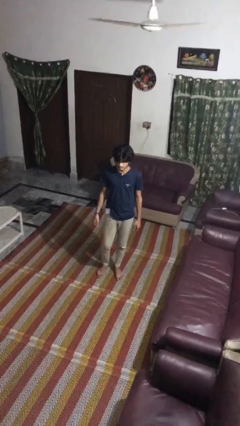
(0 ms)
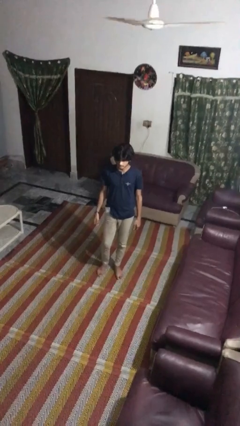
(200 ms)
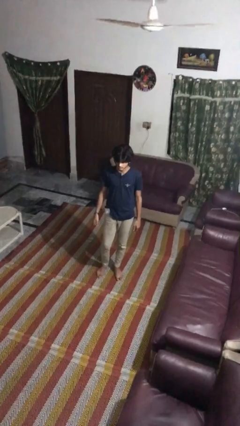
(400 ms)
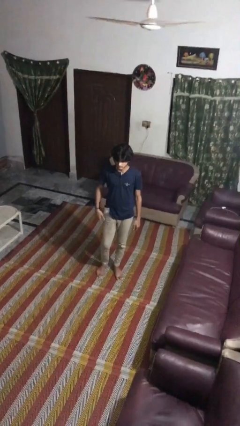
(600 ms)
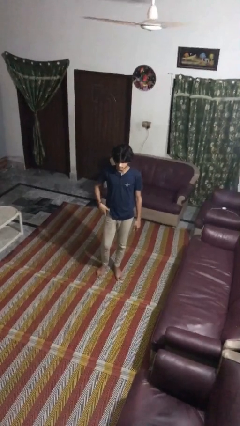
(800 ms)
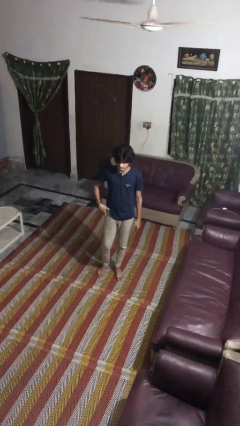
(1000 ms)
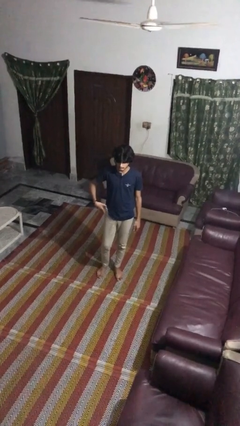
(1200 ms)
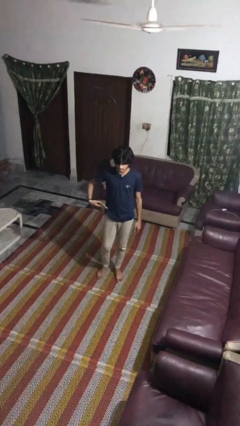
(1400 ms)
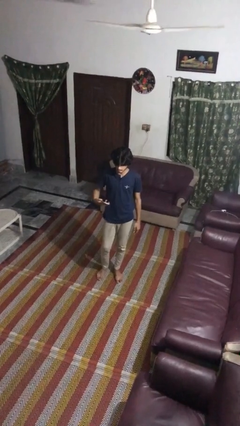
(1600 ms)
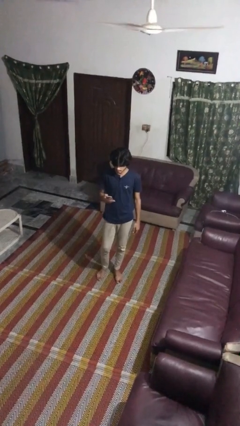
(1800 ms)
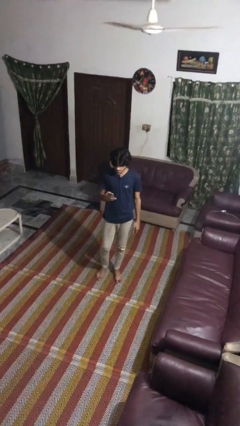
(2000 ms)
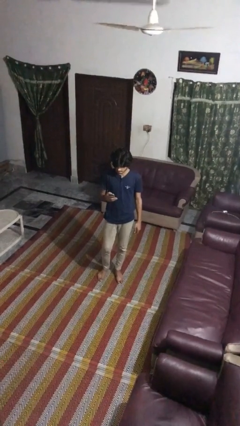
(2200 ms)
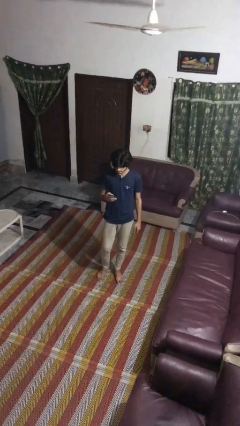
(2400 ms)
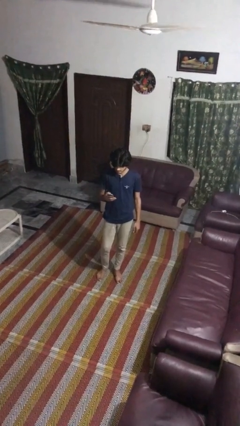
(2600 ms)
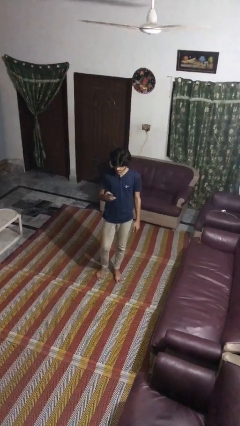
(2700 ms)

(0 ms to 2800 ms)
person takes phone from pocket

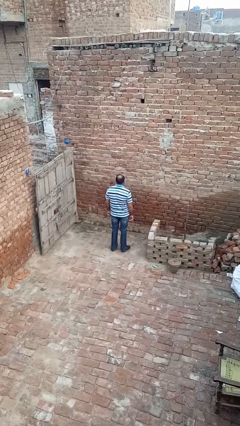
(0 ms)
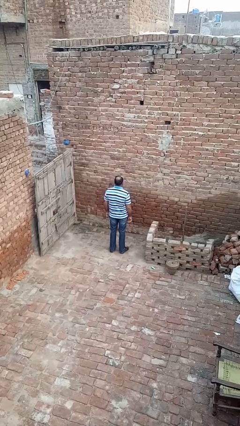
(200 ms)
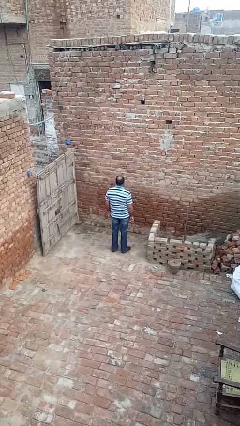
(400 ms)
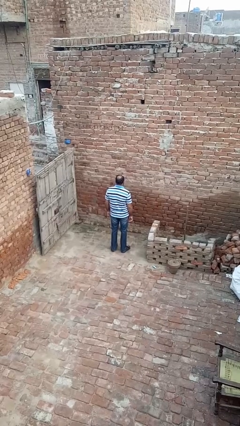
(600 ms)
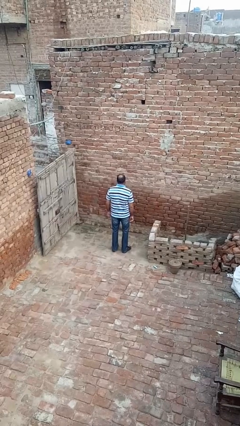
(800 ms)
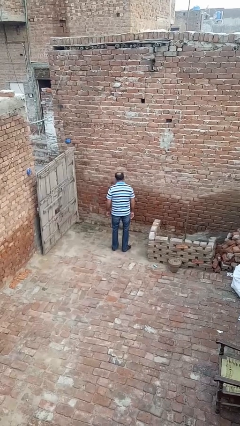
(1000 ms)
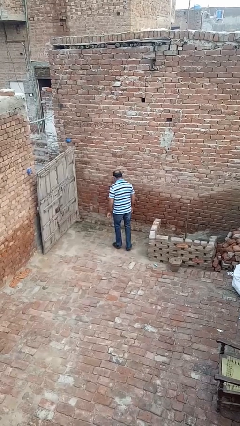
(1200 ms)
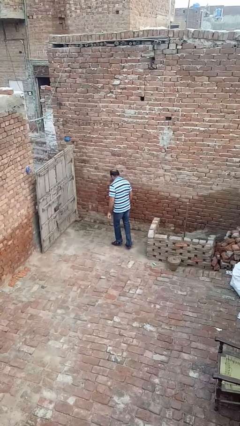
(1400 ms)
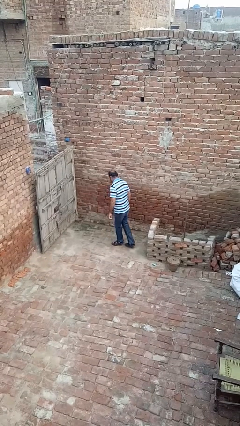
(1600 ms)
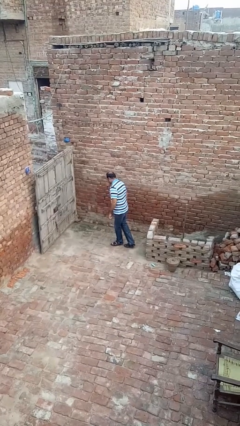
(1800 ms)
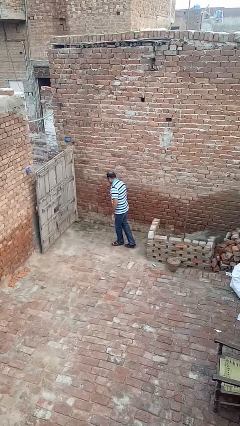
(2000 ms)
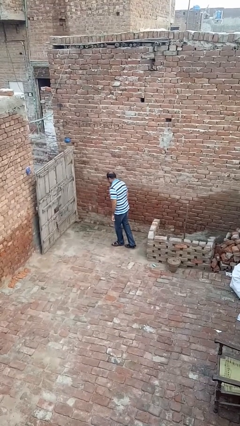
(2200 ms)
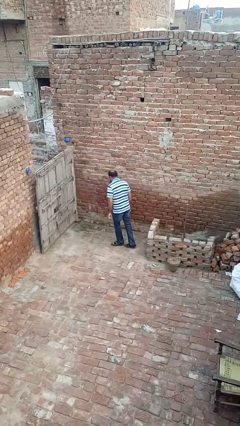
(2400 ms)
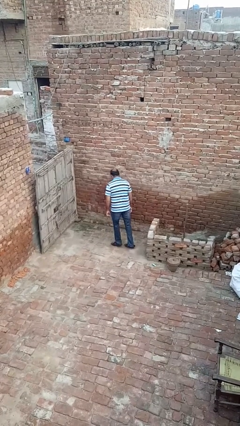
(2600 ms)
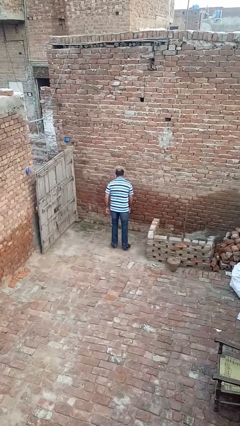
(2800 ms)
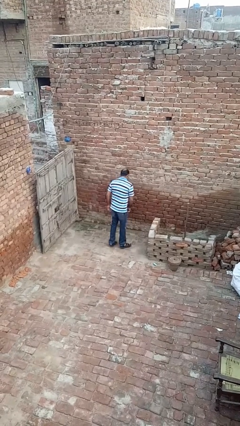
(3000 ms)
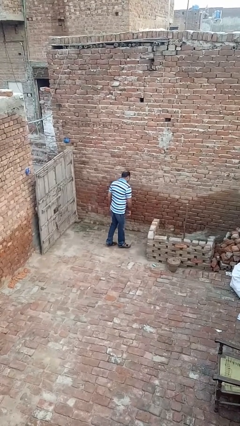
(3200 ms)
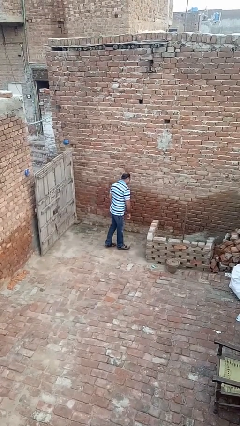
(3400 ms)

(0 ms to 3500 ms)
person twirls

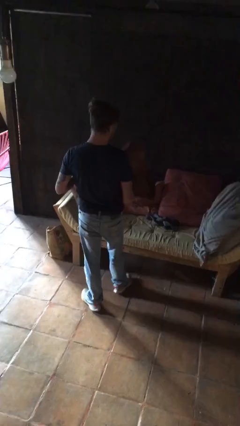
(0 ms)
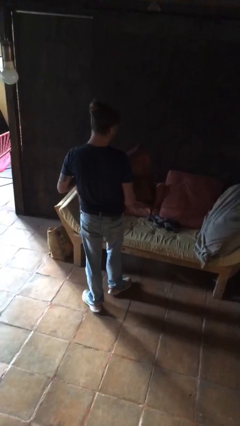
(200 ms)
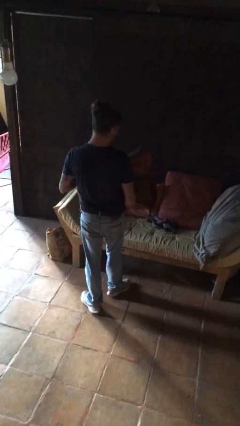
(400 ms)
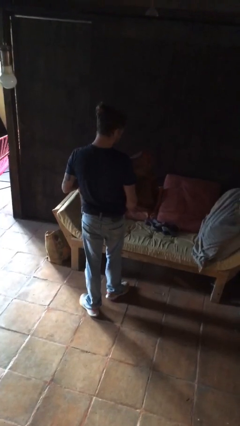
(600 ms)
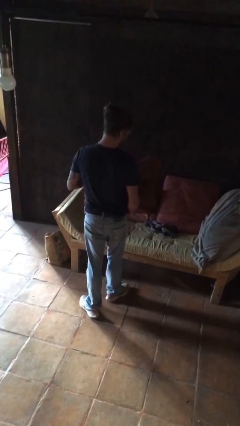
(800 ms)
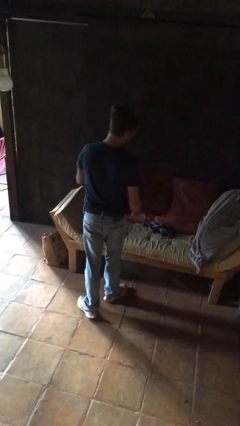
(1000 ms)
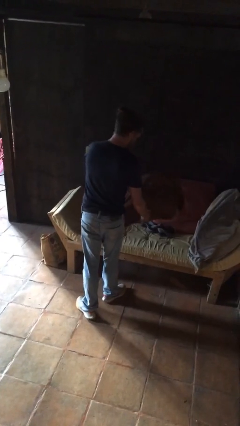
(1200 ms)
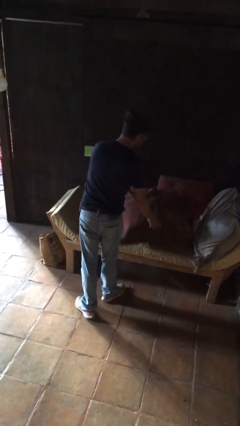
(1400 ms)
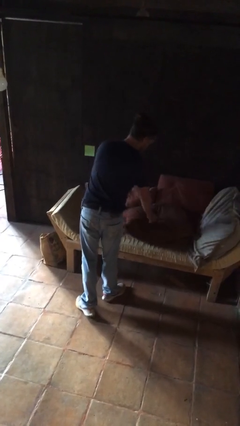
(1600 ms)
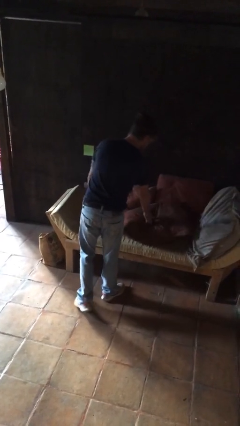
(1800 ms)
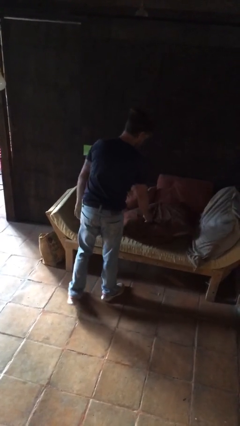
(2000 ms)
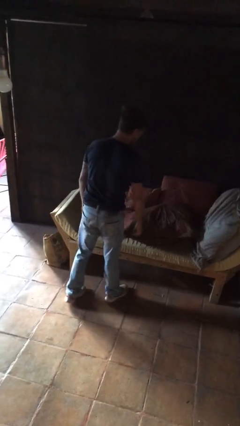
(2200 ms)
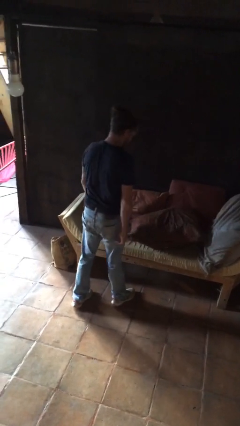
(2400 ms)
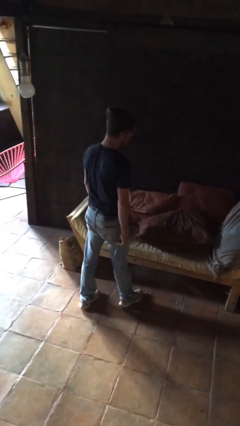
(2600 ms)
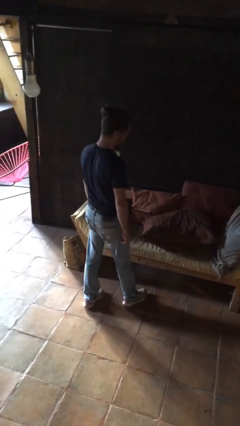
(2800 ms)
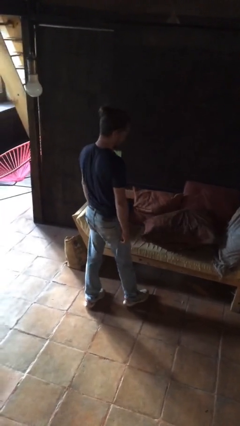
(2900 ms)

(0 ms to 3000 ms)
person puts down object on couch

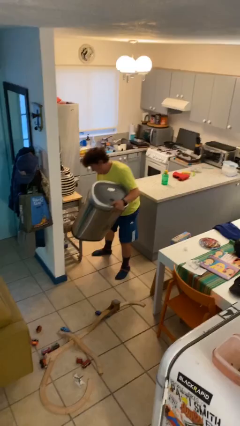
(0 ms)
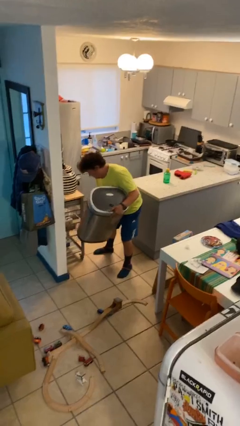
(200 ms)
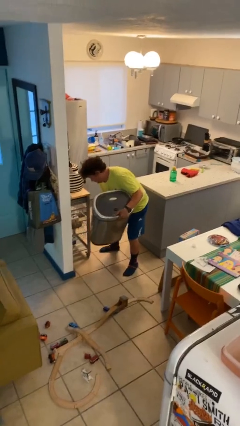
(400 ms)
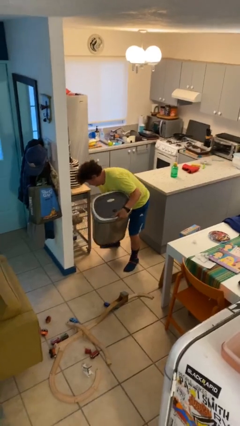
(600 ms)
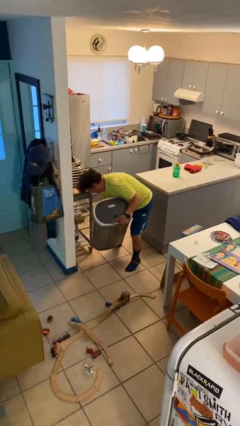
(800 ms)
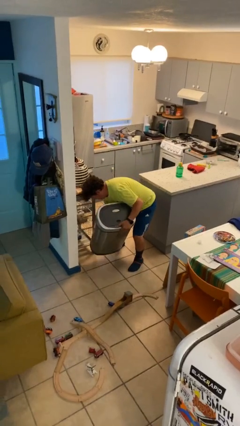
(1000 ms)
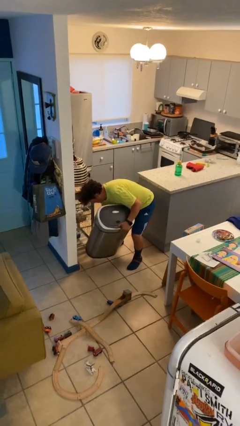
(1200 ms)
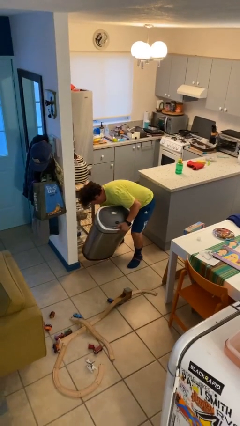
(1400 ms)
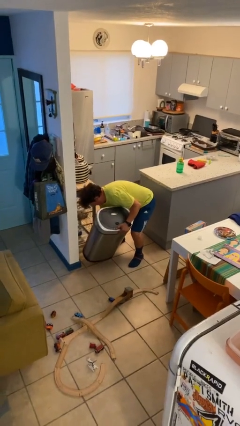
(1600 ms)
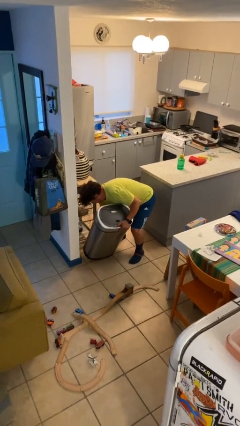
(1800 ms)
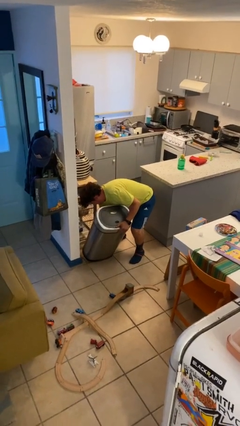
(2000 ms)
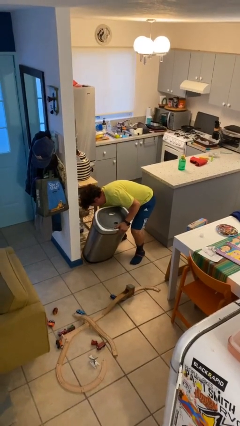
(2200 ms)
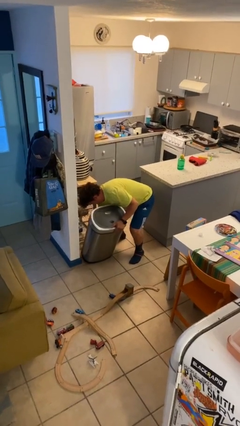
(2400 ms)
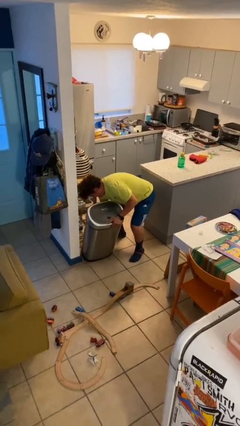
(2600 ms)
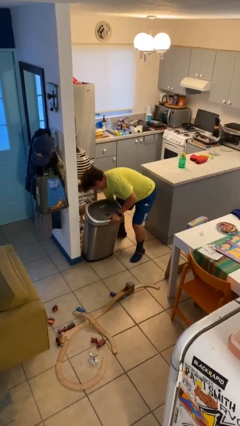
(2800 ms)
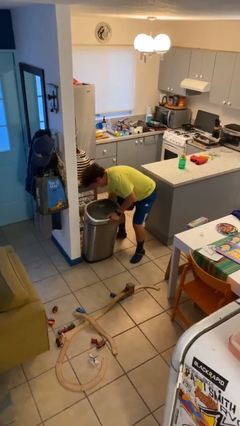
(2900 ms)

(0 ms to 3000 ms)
person puts down object on floor

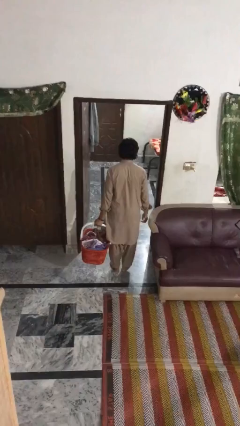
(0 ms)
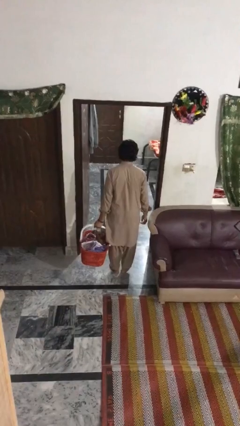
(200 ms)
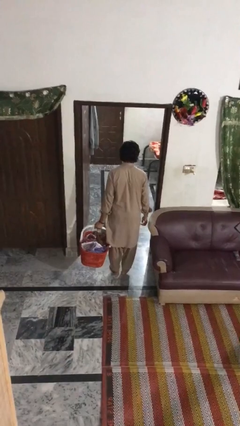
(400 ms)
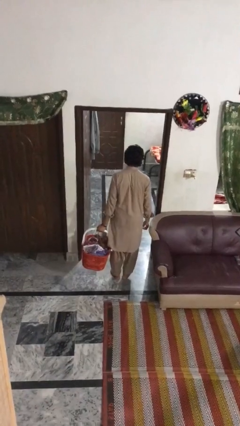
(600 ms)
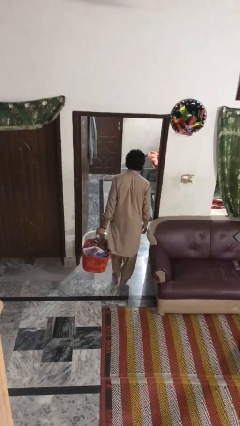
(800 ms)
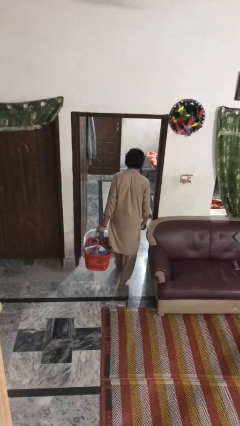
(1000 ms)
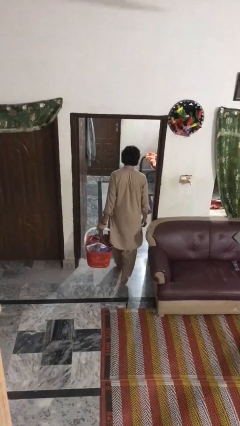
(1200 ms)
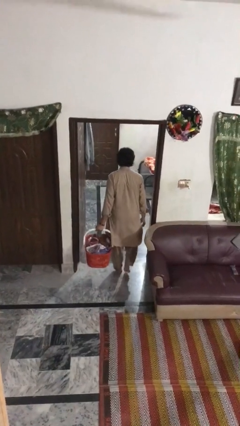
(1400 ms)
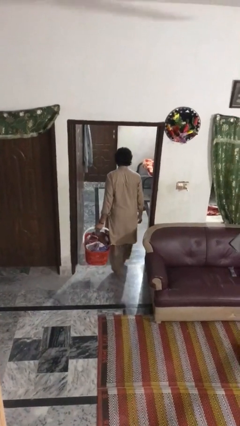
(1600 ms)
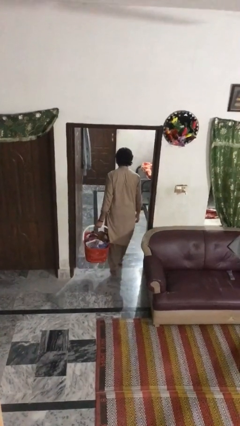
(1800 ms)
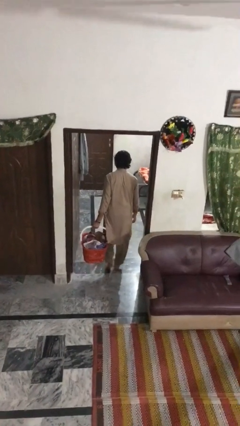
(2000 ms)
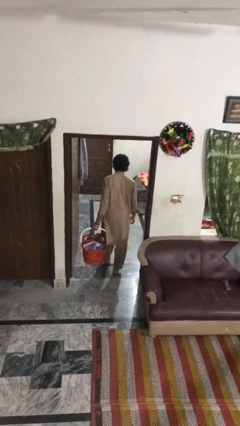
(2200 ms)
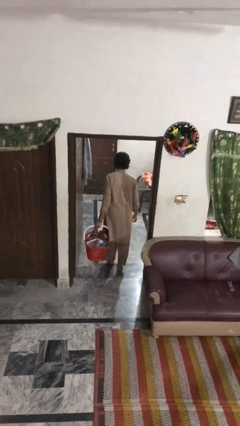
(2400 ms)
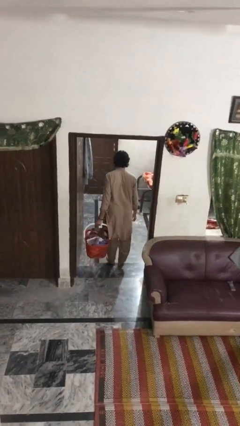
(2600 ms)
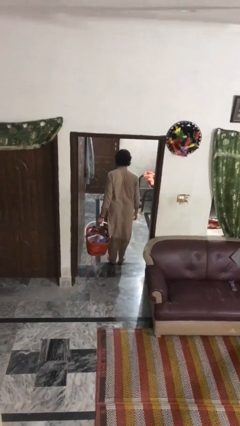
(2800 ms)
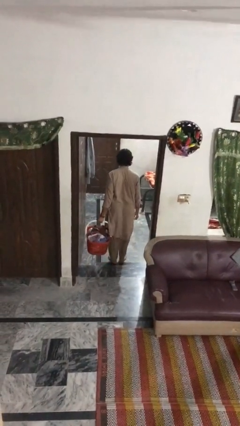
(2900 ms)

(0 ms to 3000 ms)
person carries laundry basket

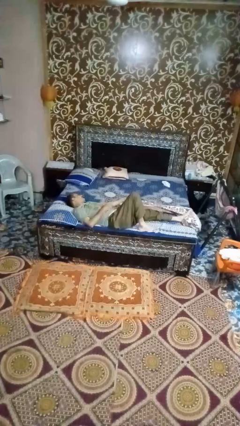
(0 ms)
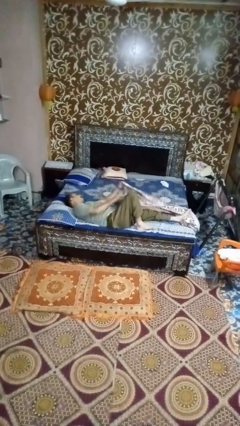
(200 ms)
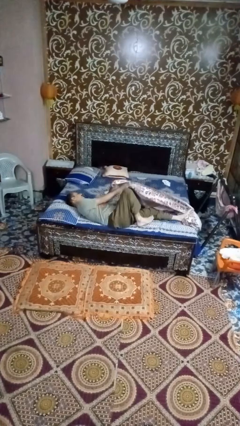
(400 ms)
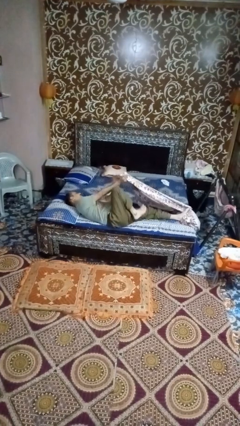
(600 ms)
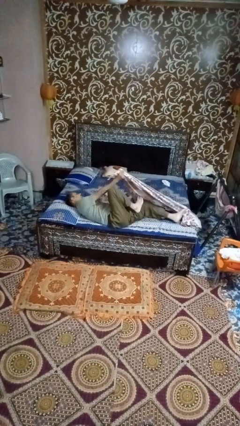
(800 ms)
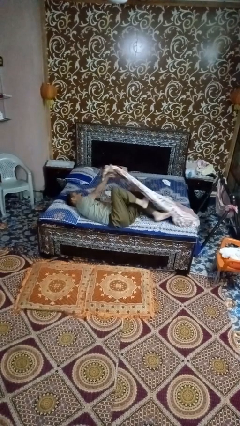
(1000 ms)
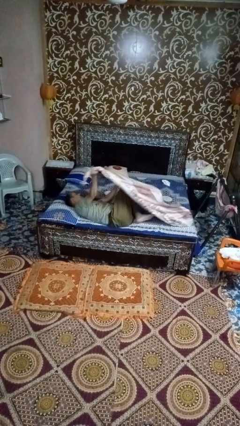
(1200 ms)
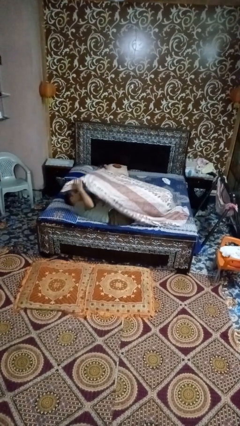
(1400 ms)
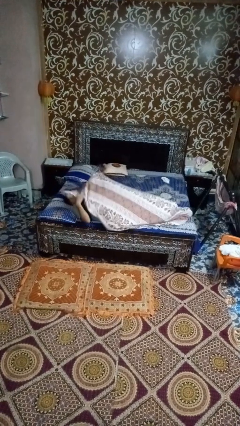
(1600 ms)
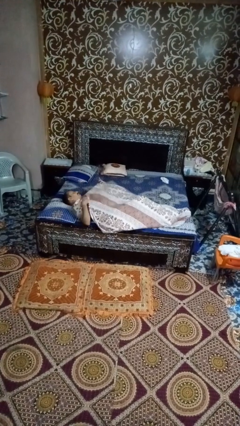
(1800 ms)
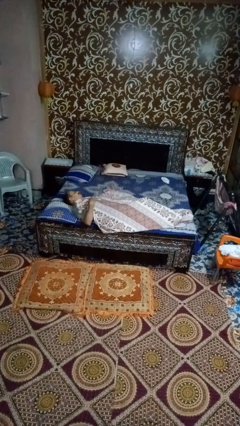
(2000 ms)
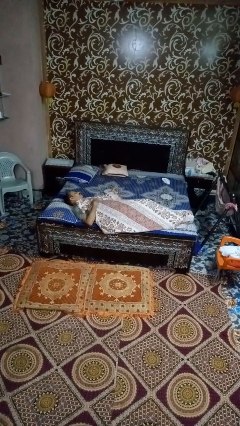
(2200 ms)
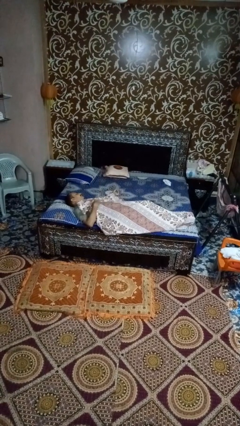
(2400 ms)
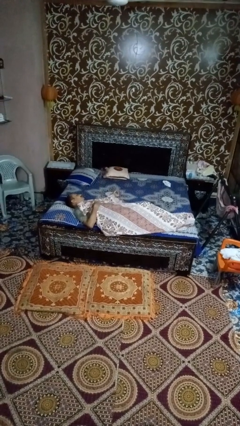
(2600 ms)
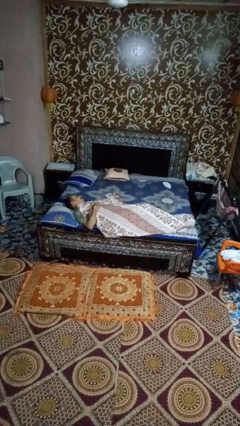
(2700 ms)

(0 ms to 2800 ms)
person covers with bedsheets
